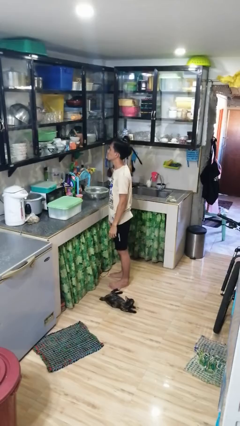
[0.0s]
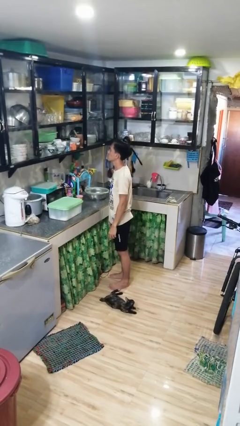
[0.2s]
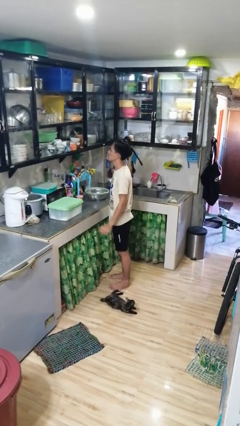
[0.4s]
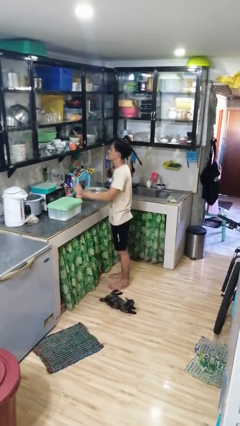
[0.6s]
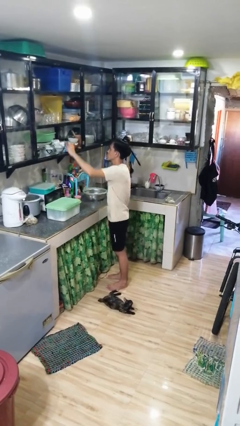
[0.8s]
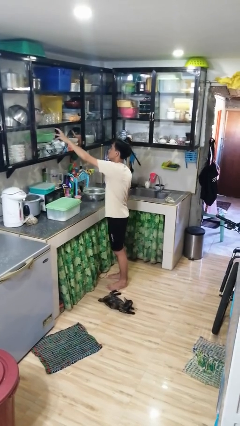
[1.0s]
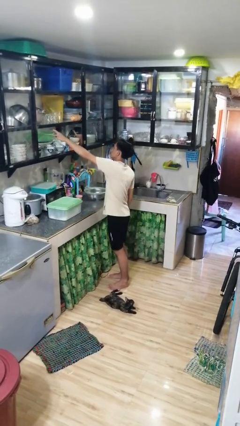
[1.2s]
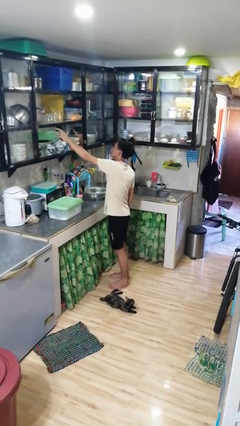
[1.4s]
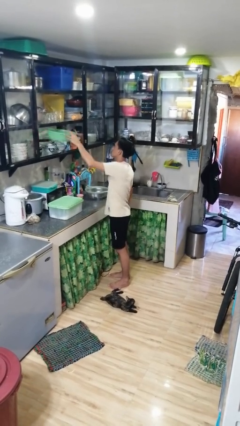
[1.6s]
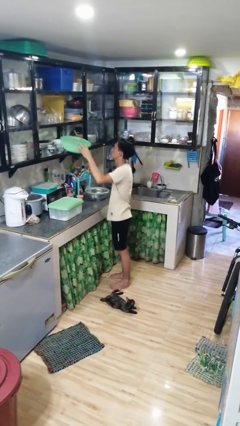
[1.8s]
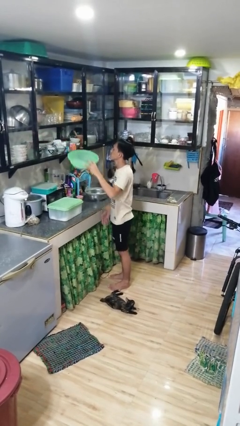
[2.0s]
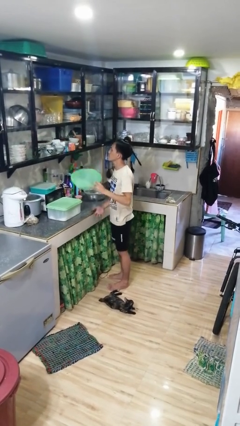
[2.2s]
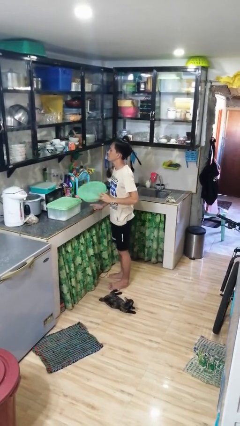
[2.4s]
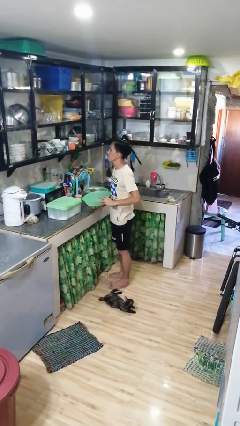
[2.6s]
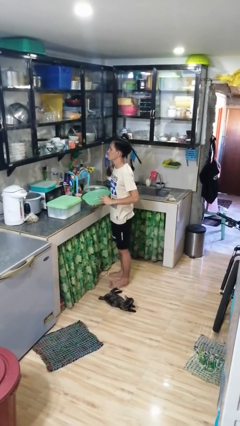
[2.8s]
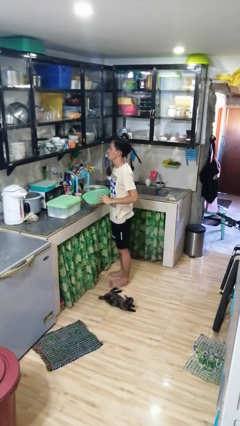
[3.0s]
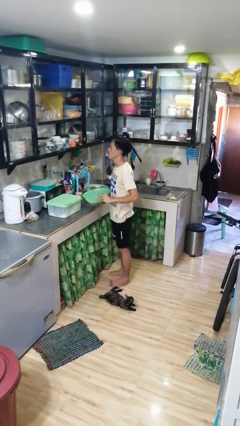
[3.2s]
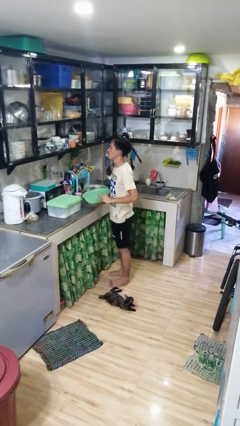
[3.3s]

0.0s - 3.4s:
person picks up object from cabinet

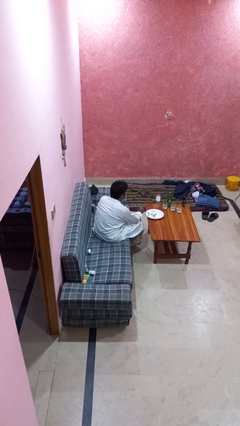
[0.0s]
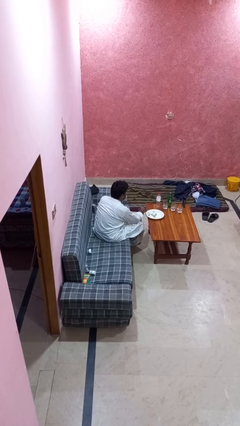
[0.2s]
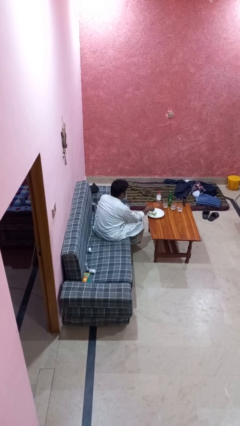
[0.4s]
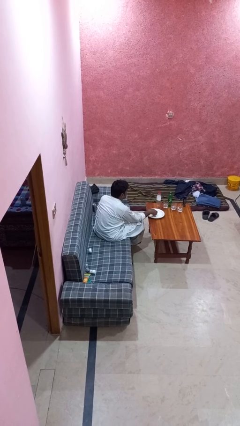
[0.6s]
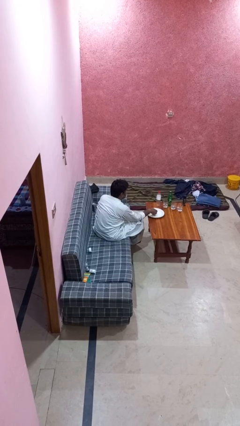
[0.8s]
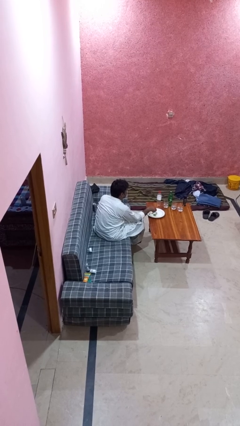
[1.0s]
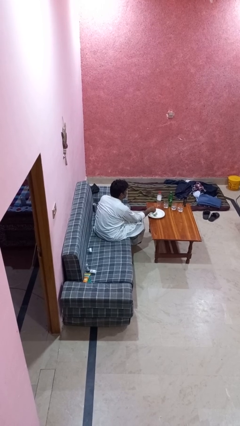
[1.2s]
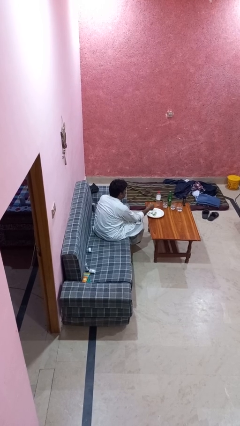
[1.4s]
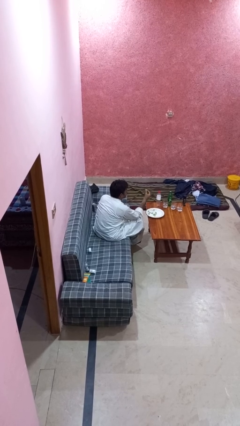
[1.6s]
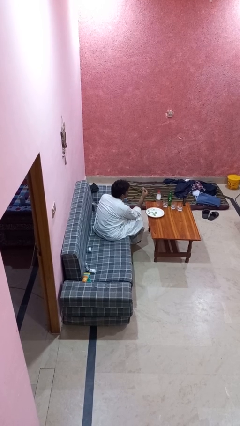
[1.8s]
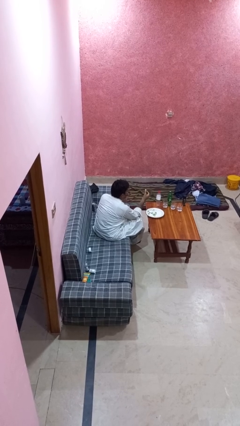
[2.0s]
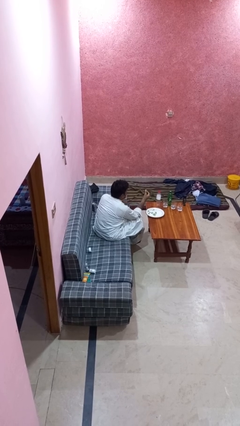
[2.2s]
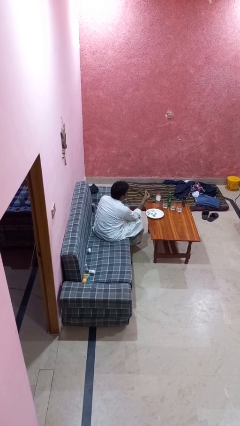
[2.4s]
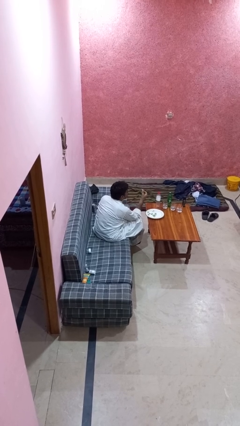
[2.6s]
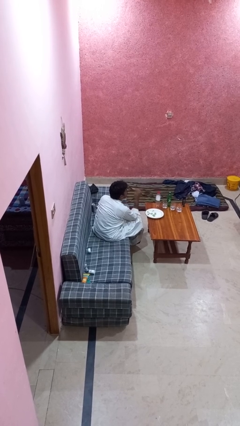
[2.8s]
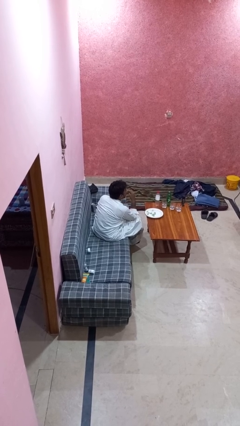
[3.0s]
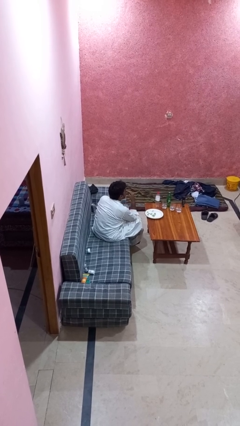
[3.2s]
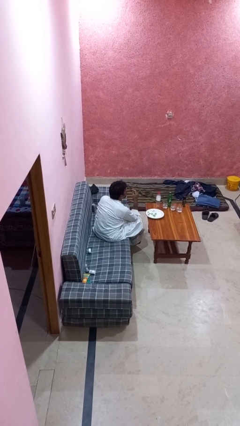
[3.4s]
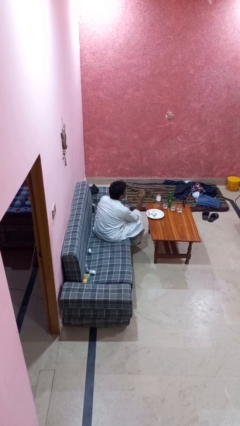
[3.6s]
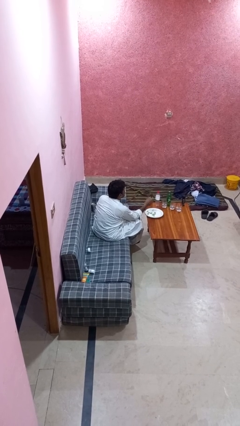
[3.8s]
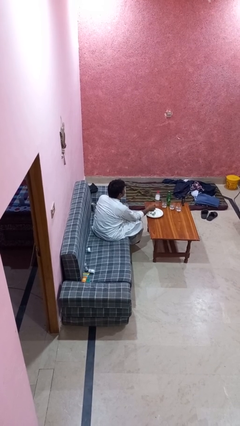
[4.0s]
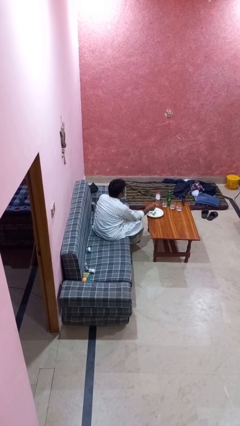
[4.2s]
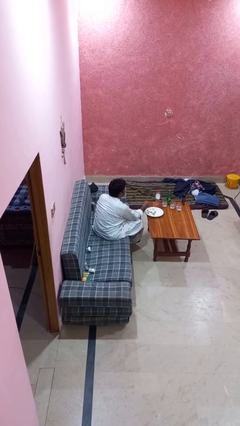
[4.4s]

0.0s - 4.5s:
person eats with hands

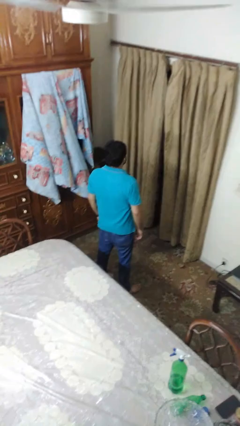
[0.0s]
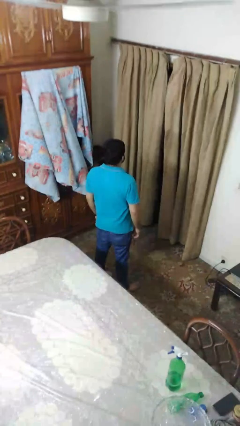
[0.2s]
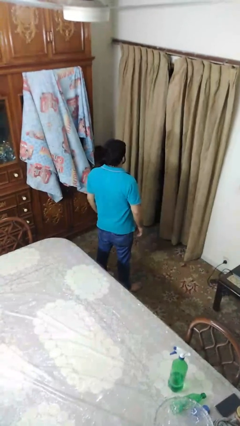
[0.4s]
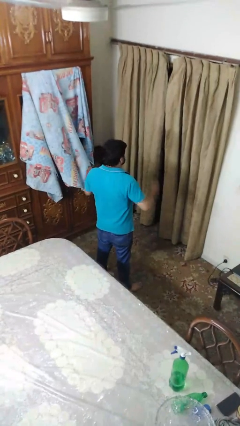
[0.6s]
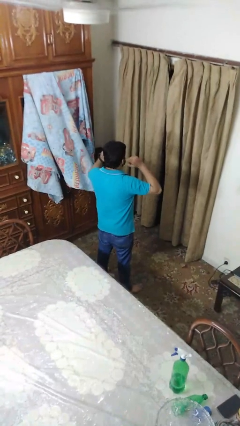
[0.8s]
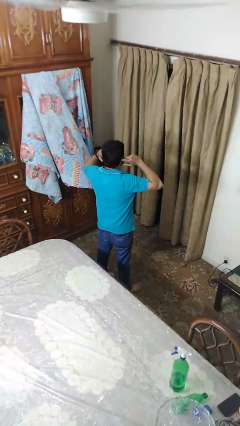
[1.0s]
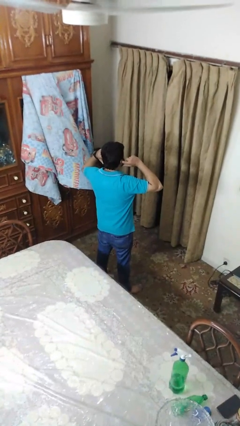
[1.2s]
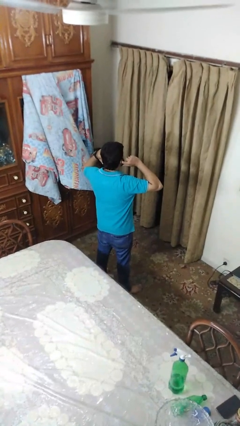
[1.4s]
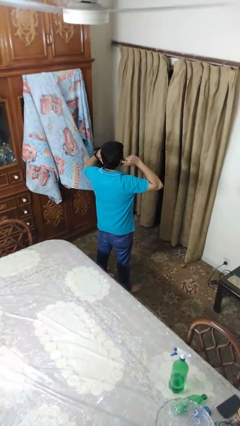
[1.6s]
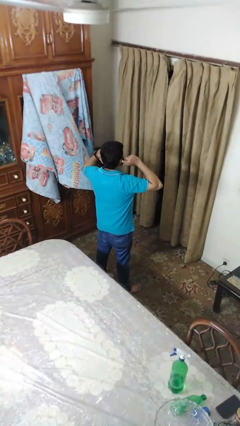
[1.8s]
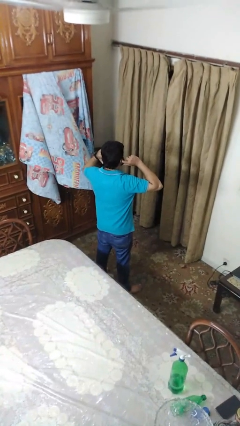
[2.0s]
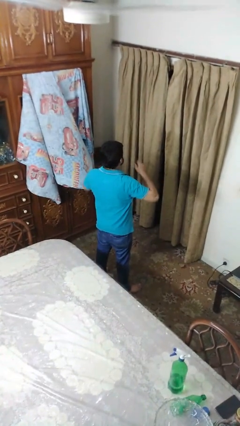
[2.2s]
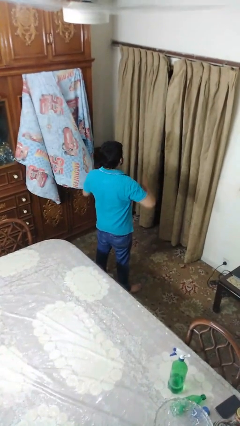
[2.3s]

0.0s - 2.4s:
person puts fingers in ear

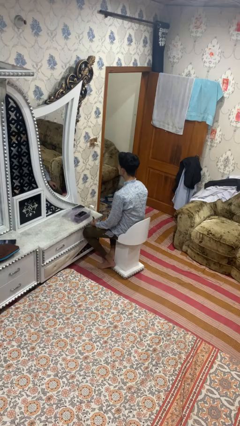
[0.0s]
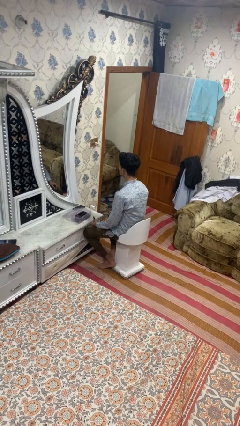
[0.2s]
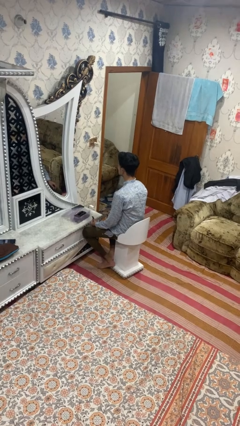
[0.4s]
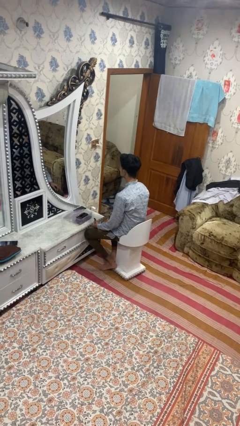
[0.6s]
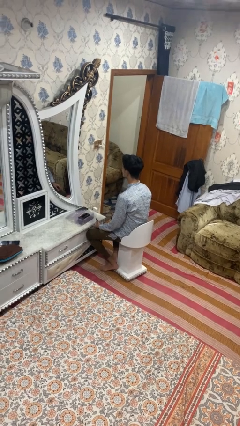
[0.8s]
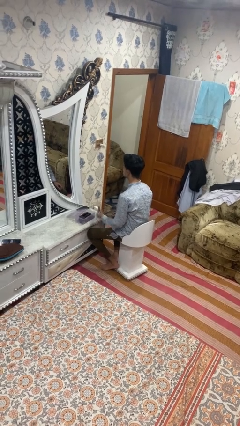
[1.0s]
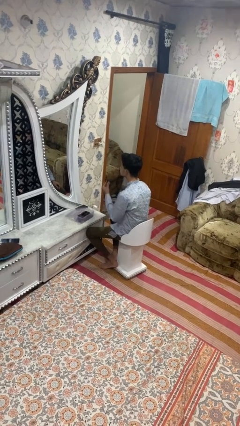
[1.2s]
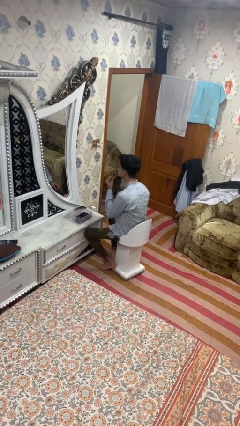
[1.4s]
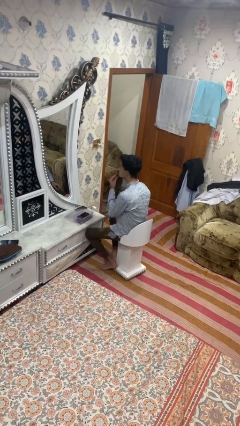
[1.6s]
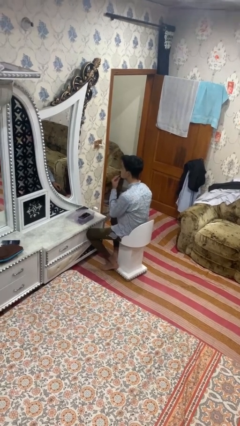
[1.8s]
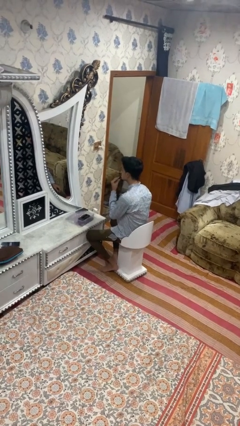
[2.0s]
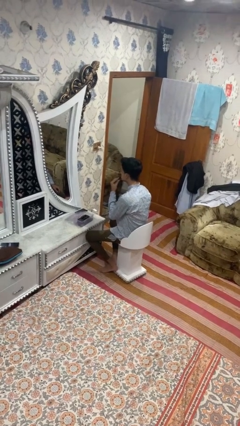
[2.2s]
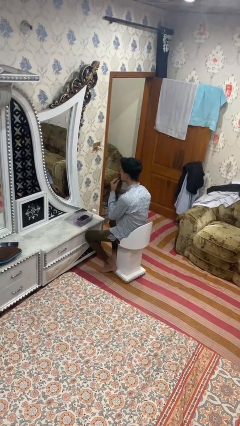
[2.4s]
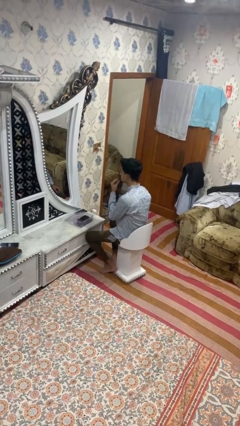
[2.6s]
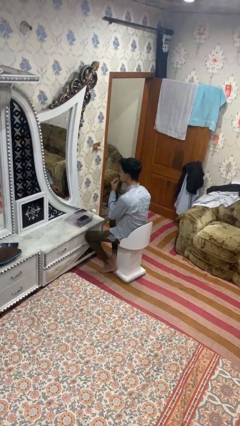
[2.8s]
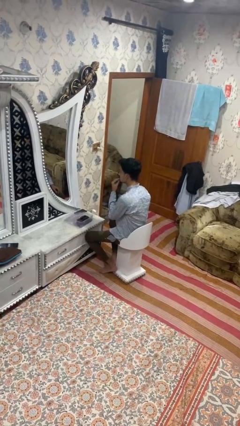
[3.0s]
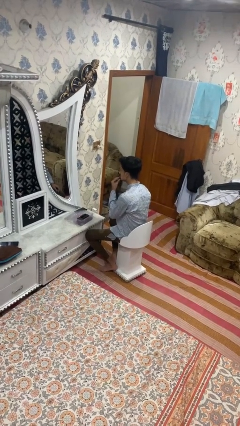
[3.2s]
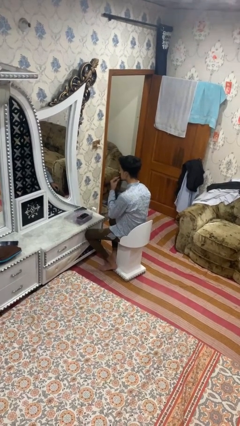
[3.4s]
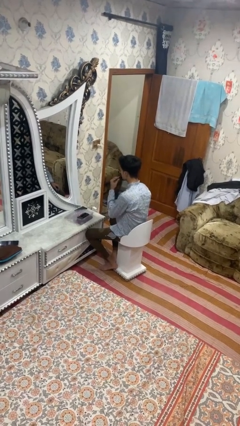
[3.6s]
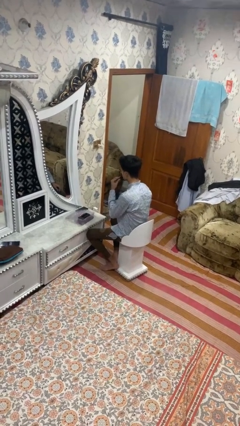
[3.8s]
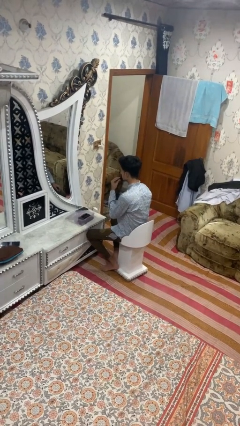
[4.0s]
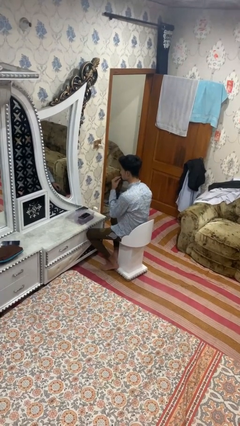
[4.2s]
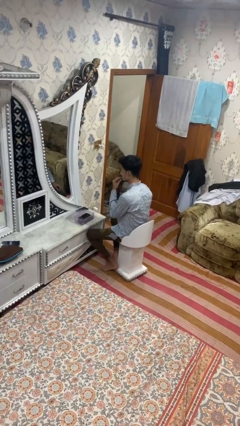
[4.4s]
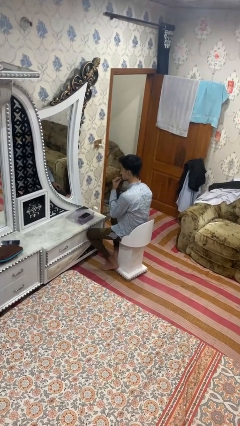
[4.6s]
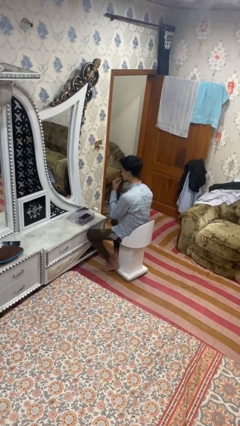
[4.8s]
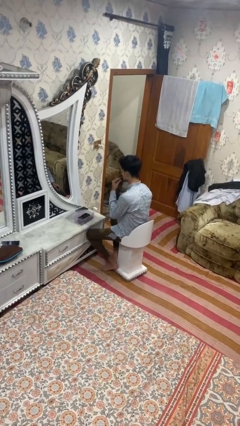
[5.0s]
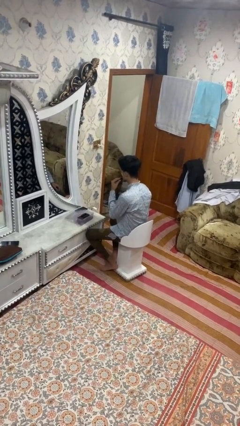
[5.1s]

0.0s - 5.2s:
person applies lip makeup

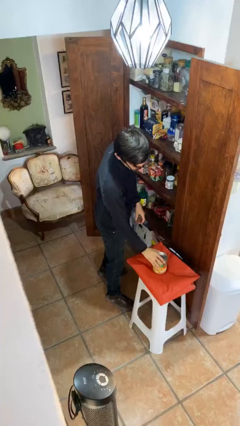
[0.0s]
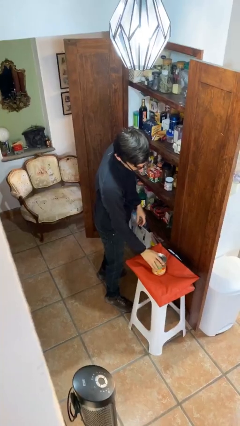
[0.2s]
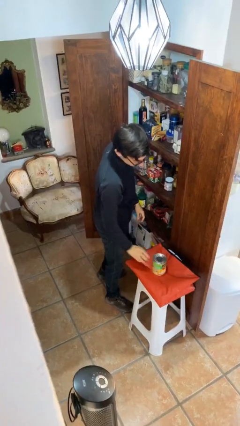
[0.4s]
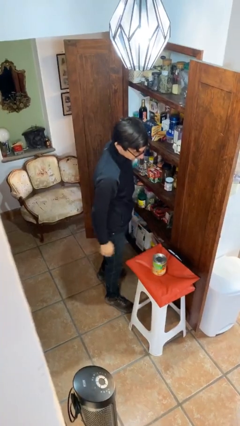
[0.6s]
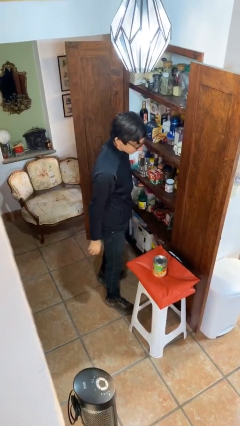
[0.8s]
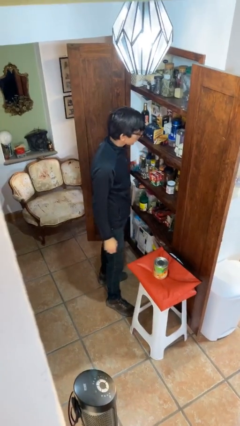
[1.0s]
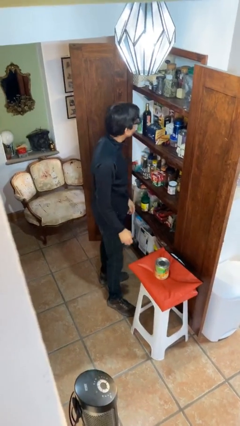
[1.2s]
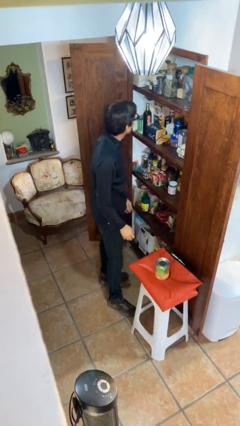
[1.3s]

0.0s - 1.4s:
person puts down object on table

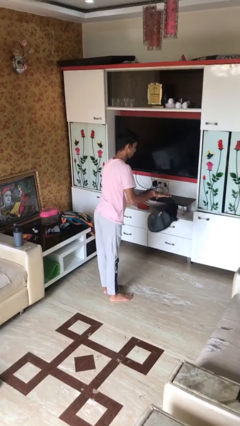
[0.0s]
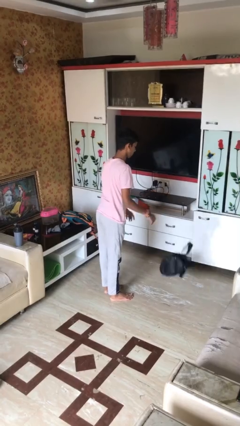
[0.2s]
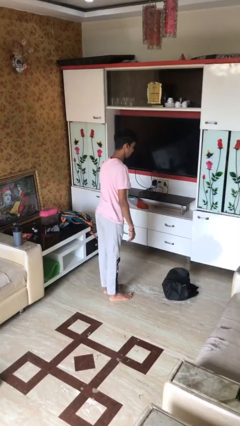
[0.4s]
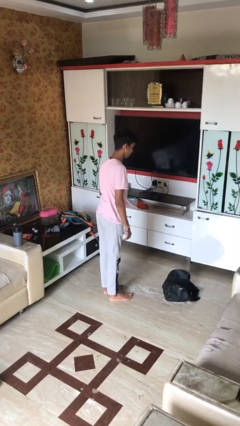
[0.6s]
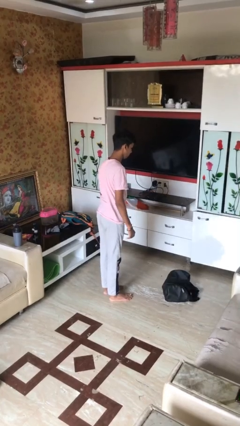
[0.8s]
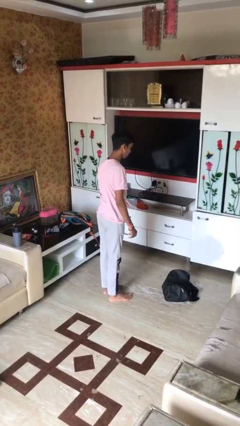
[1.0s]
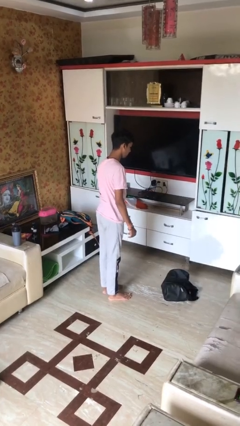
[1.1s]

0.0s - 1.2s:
person drops object
